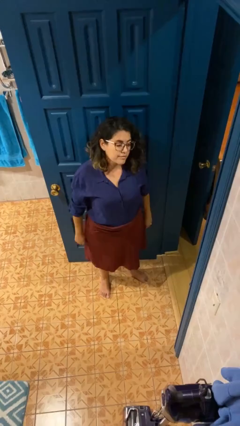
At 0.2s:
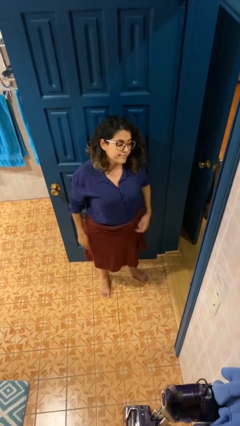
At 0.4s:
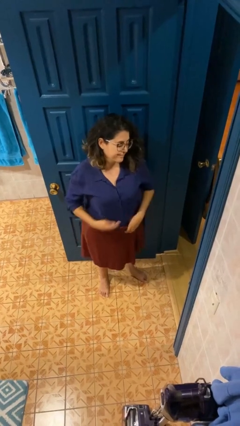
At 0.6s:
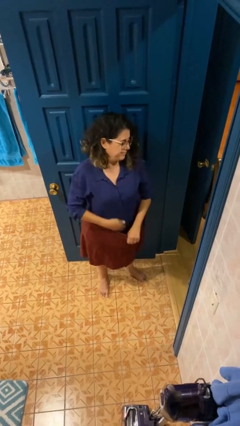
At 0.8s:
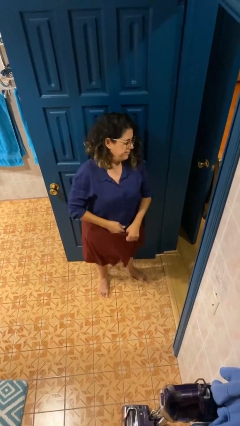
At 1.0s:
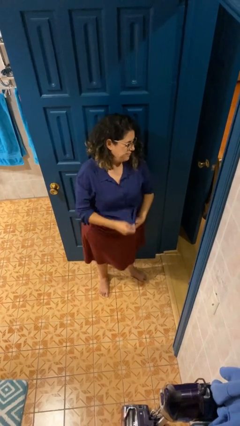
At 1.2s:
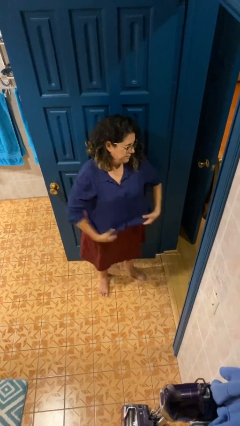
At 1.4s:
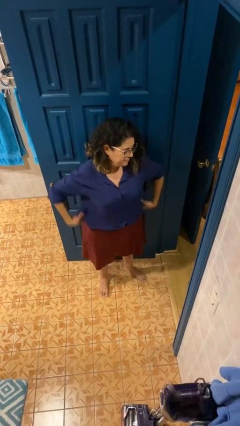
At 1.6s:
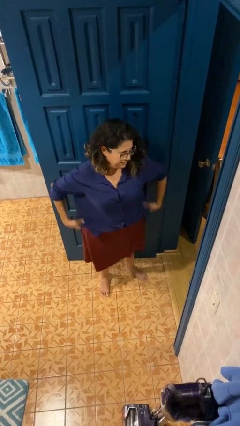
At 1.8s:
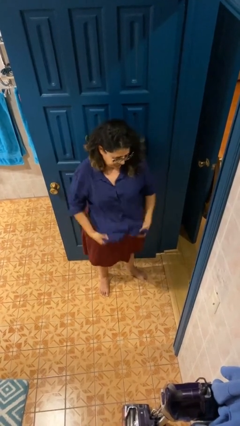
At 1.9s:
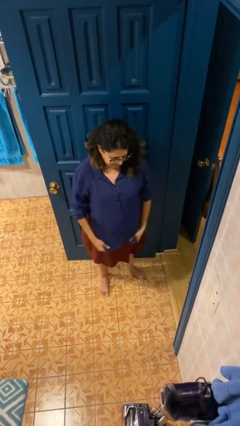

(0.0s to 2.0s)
person untucks shirt

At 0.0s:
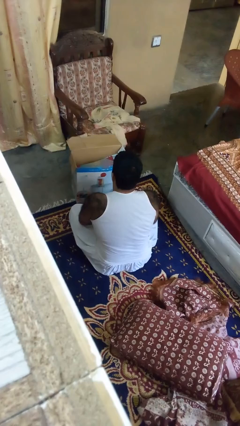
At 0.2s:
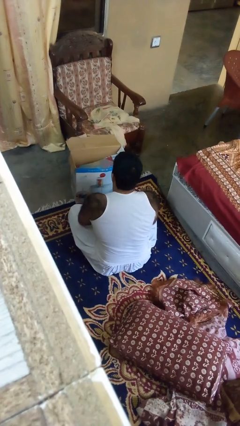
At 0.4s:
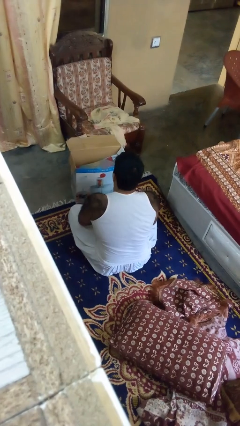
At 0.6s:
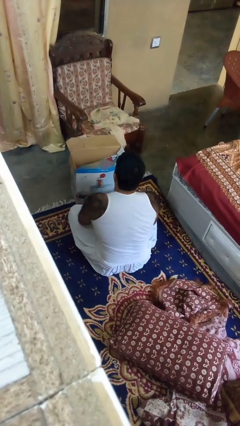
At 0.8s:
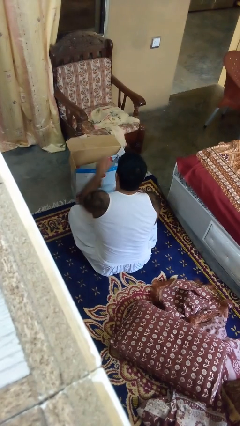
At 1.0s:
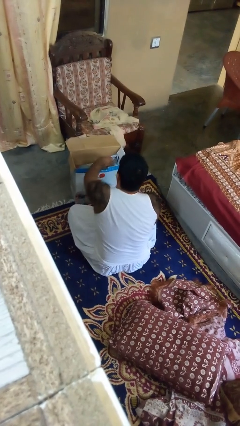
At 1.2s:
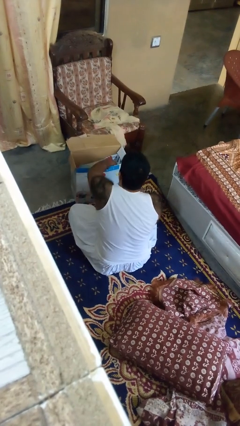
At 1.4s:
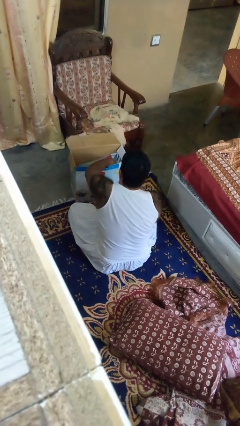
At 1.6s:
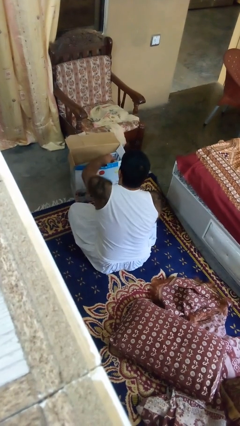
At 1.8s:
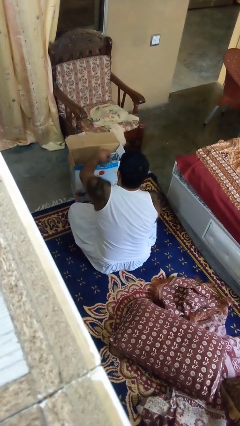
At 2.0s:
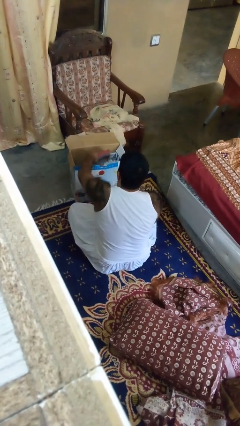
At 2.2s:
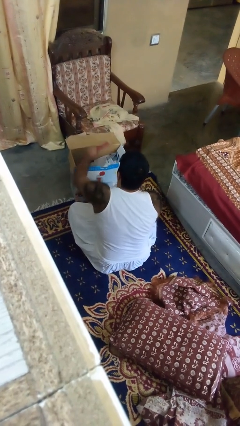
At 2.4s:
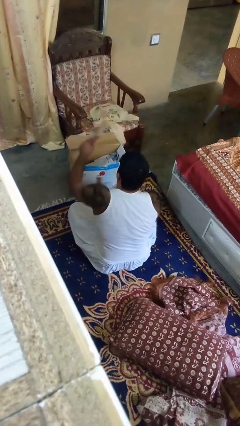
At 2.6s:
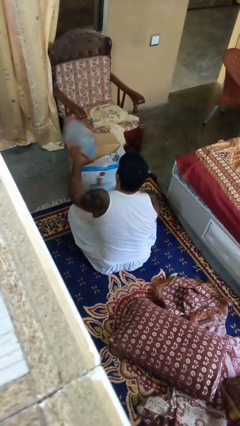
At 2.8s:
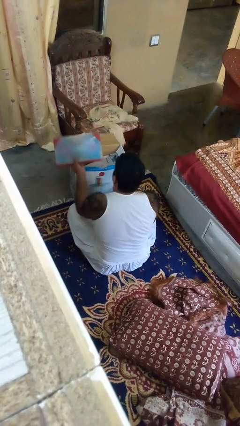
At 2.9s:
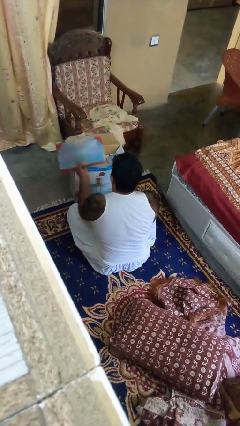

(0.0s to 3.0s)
person takes object from box

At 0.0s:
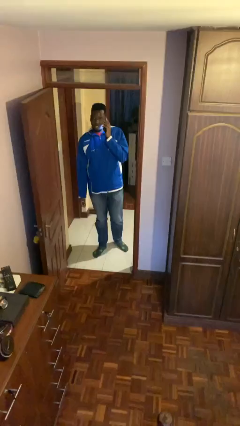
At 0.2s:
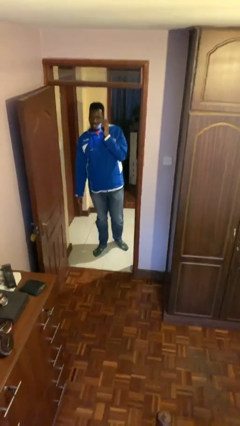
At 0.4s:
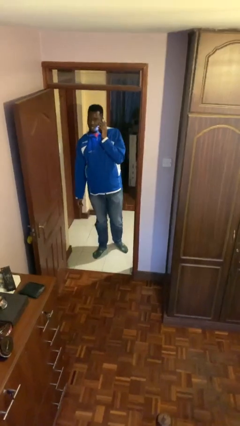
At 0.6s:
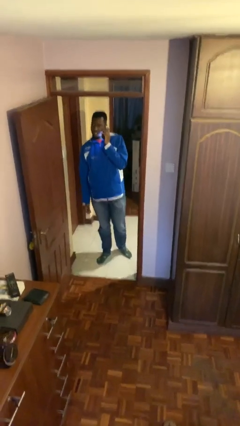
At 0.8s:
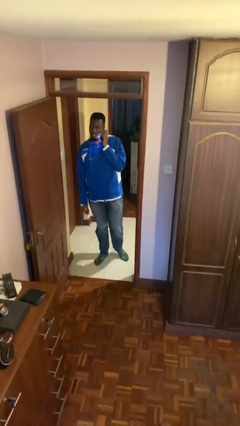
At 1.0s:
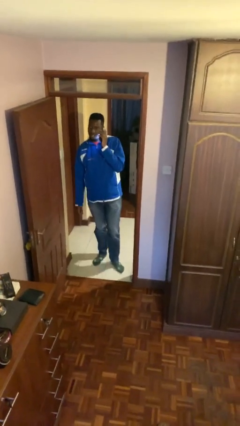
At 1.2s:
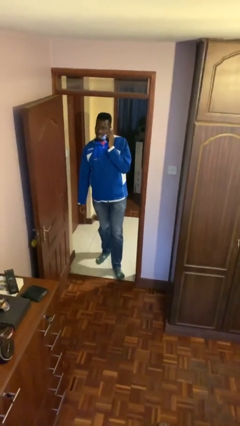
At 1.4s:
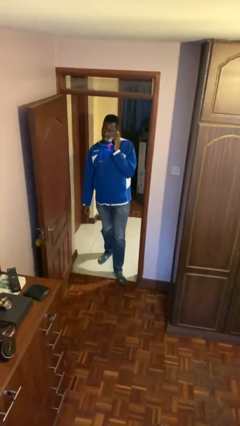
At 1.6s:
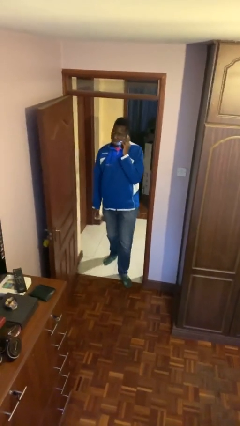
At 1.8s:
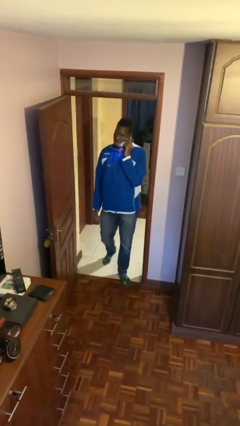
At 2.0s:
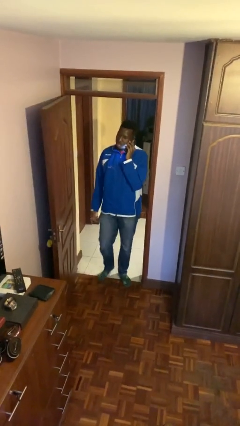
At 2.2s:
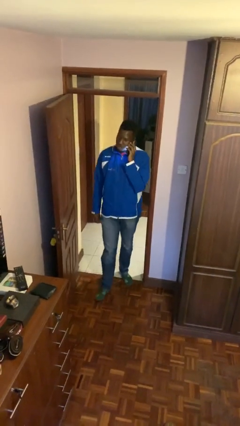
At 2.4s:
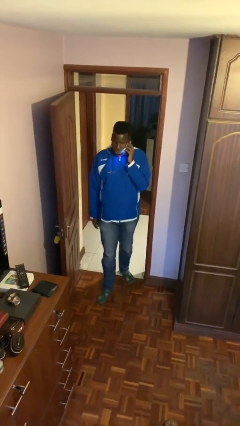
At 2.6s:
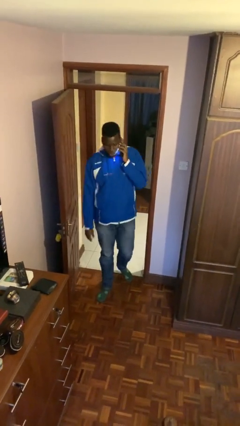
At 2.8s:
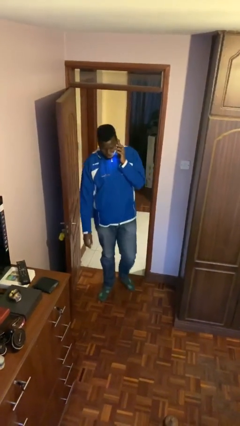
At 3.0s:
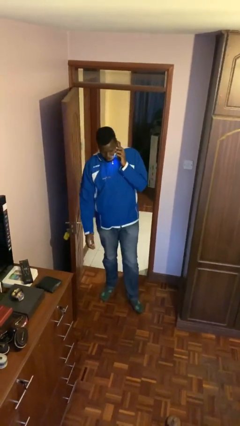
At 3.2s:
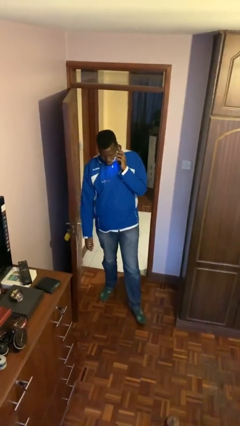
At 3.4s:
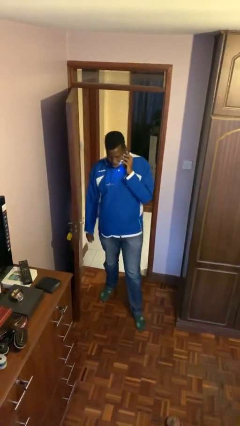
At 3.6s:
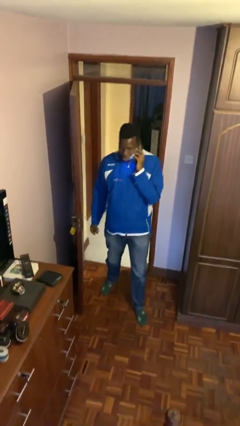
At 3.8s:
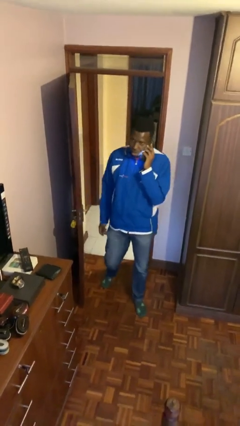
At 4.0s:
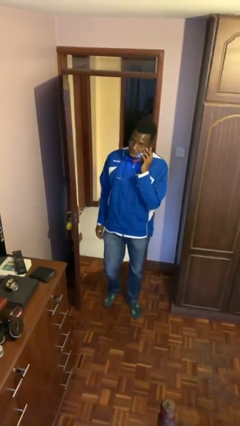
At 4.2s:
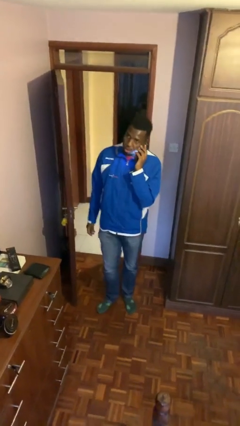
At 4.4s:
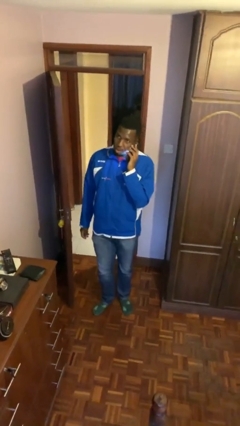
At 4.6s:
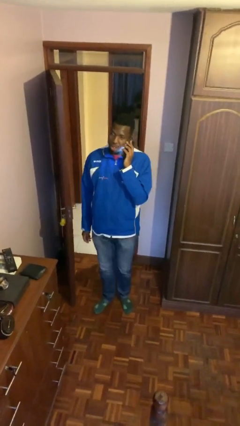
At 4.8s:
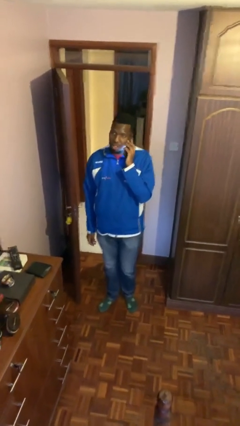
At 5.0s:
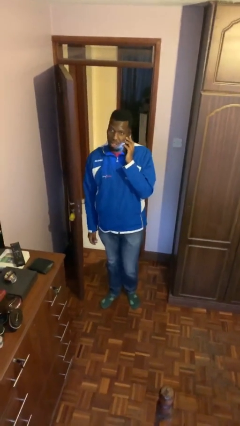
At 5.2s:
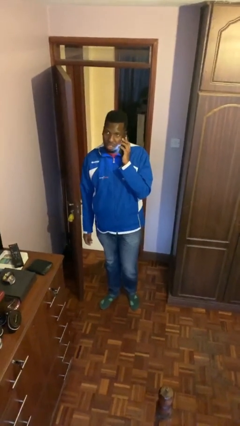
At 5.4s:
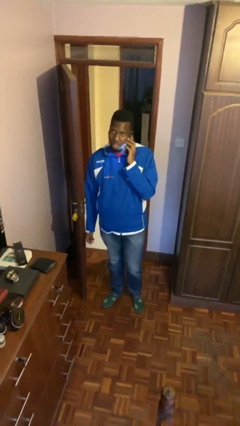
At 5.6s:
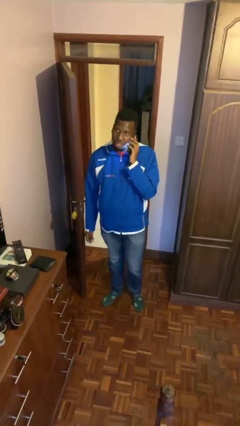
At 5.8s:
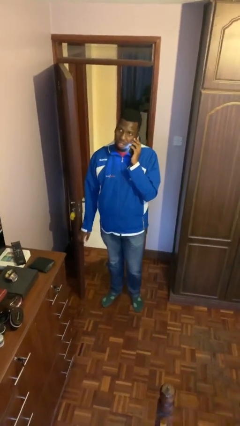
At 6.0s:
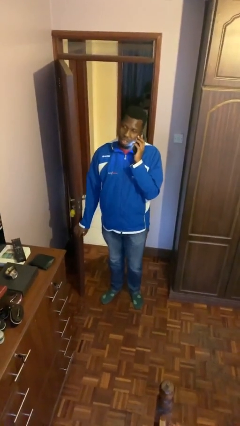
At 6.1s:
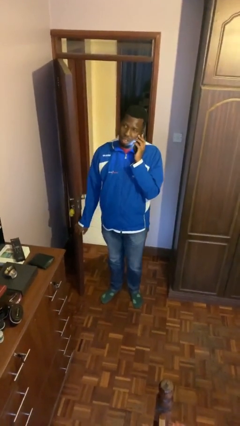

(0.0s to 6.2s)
person enters scene through structure

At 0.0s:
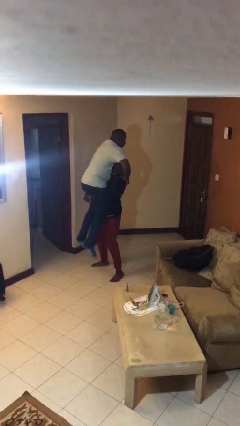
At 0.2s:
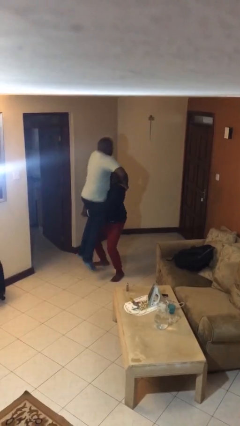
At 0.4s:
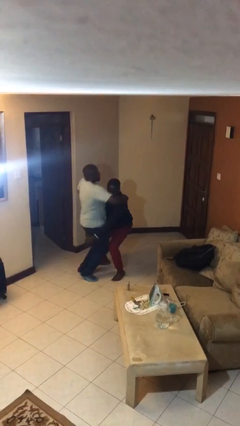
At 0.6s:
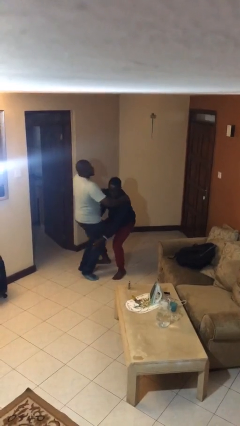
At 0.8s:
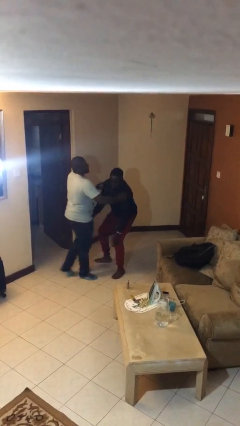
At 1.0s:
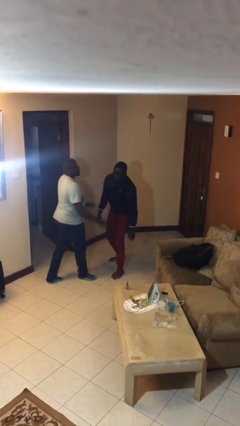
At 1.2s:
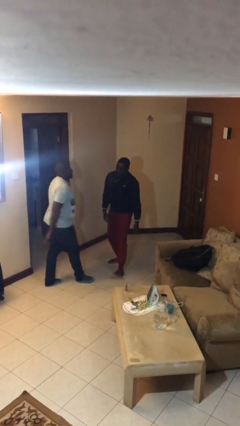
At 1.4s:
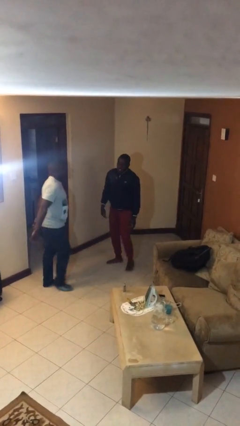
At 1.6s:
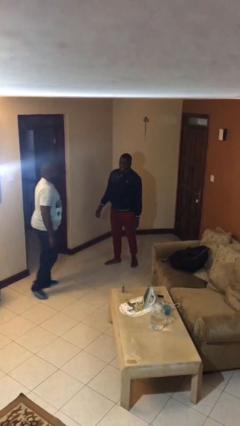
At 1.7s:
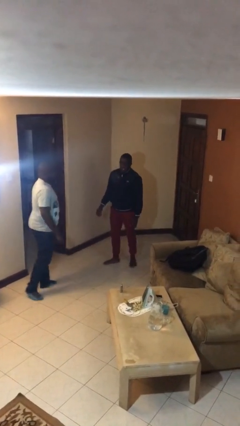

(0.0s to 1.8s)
person puts down person

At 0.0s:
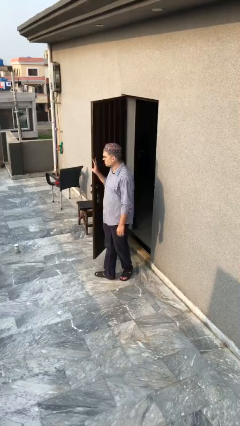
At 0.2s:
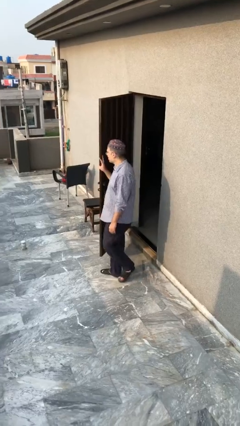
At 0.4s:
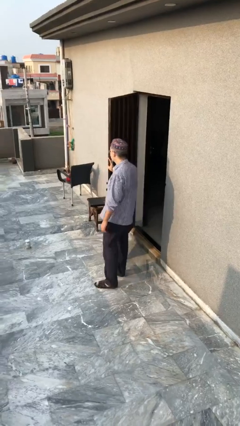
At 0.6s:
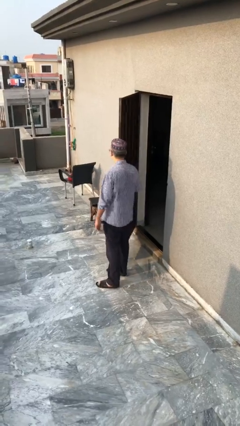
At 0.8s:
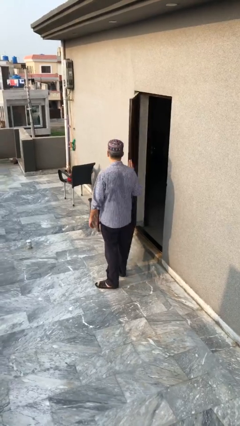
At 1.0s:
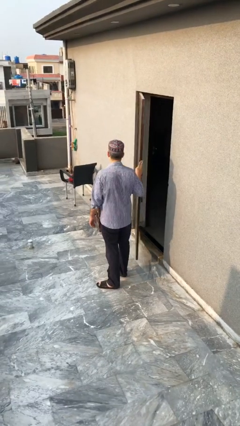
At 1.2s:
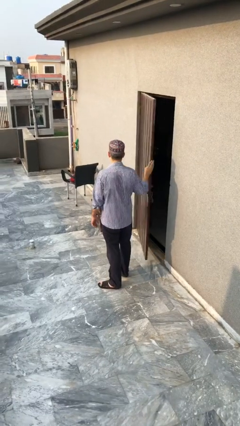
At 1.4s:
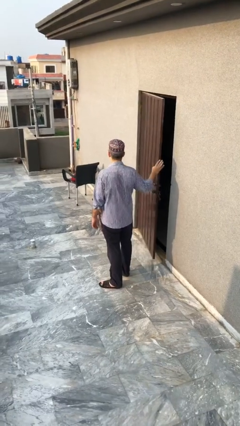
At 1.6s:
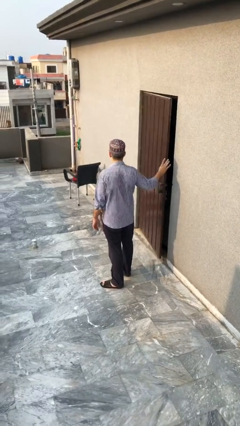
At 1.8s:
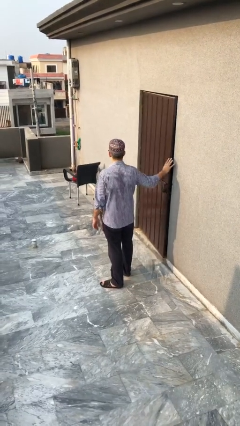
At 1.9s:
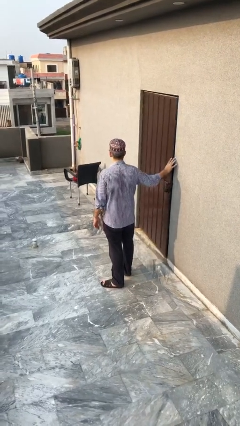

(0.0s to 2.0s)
person closes facility door

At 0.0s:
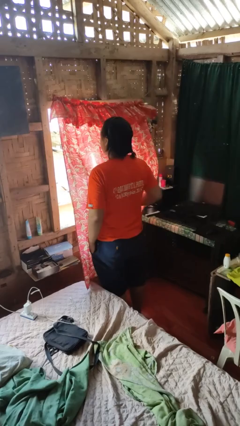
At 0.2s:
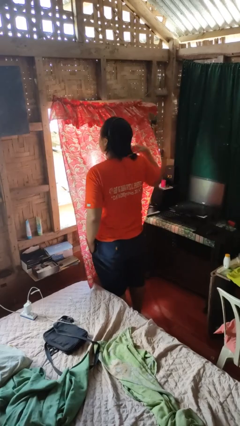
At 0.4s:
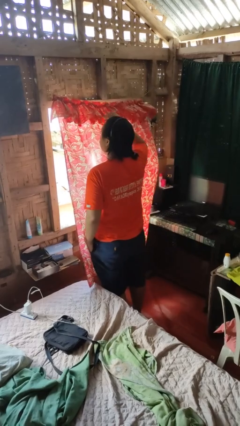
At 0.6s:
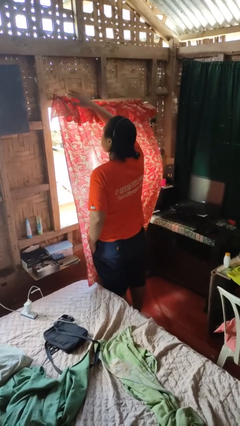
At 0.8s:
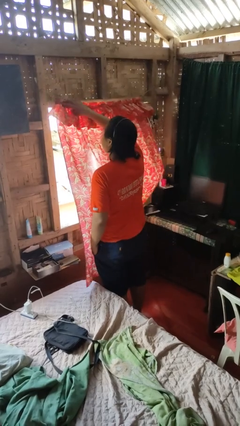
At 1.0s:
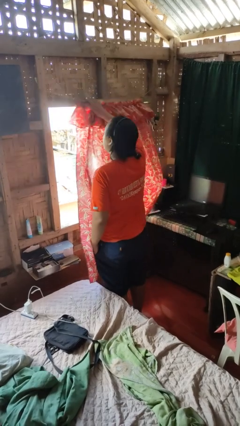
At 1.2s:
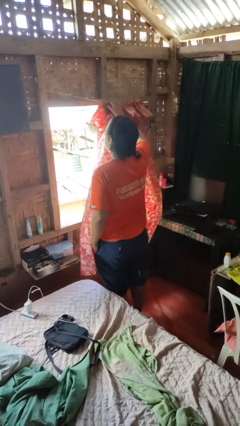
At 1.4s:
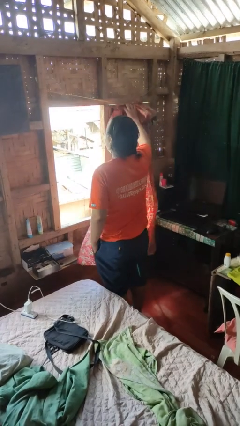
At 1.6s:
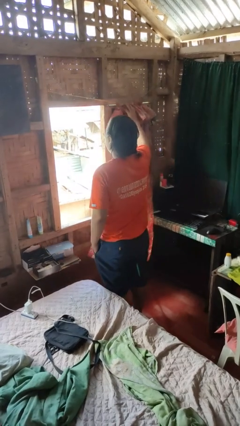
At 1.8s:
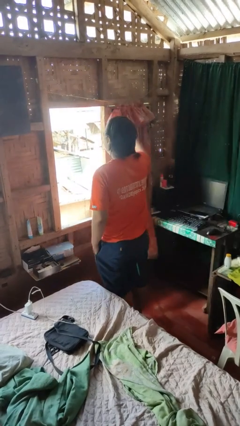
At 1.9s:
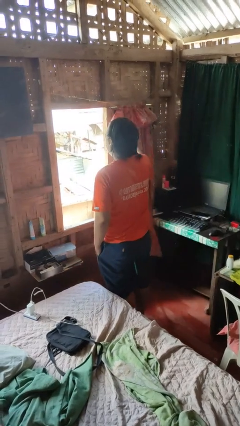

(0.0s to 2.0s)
person opens curtains

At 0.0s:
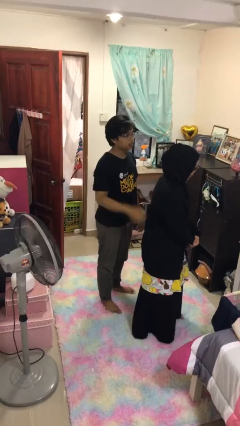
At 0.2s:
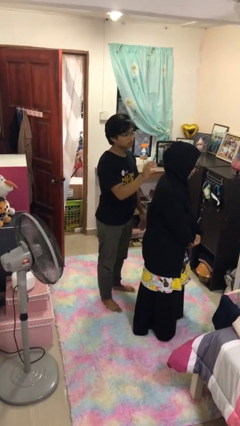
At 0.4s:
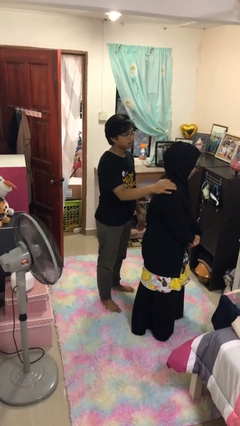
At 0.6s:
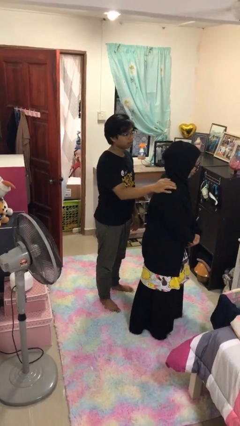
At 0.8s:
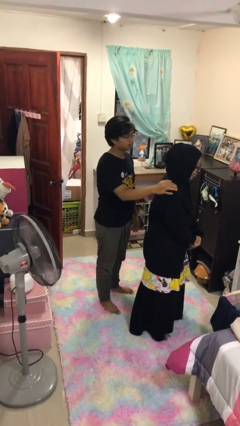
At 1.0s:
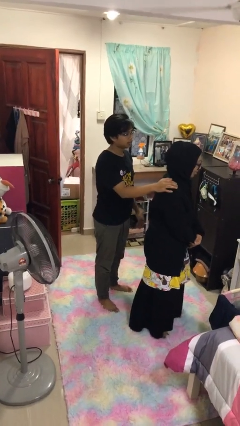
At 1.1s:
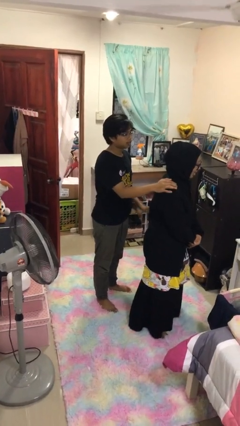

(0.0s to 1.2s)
person grabs person by shoulder
